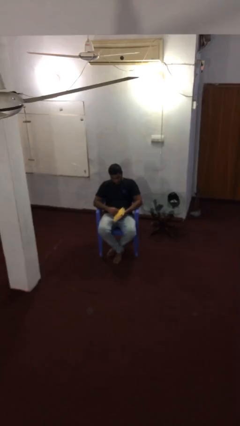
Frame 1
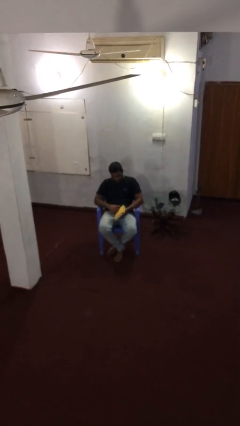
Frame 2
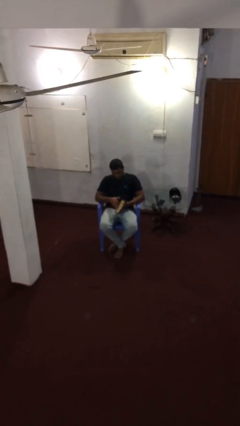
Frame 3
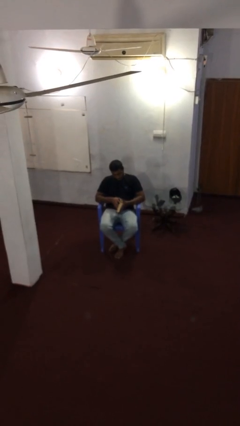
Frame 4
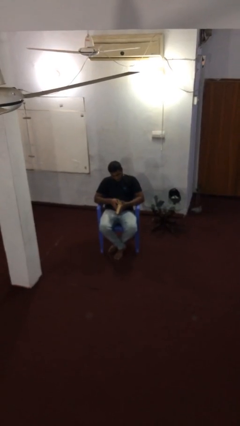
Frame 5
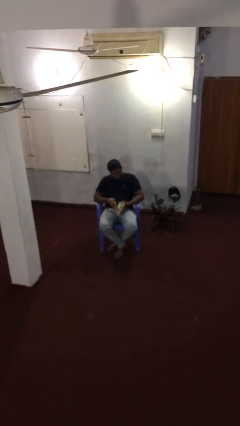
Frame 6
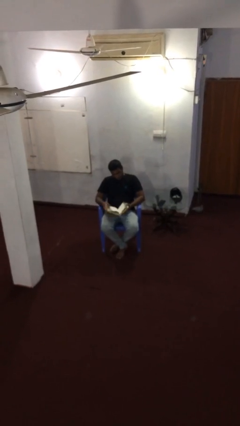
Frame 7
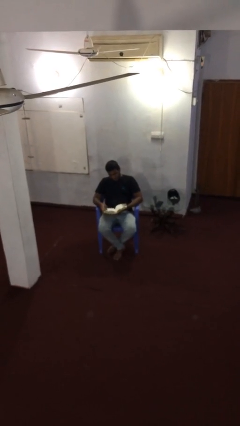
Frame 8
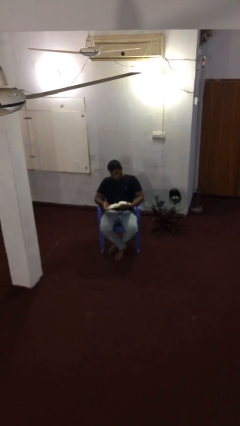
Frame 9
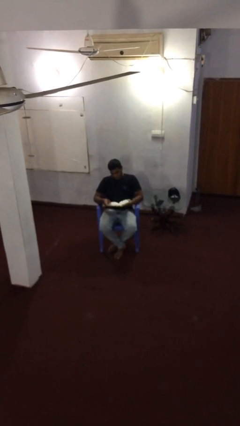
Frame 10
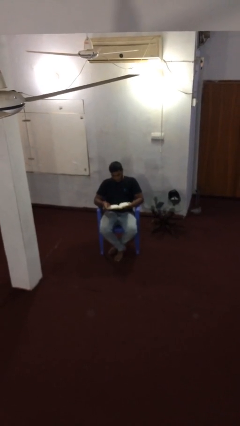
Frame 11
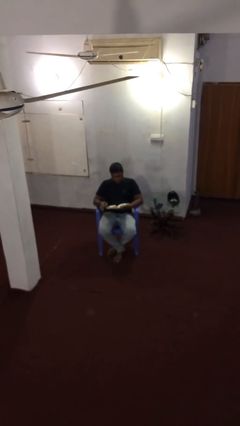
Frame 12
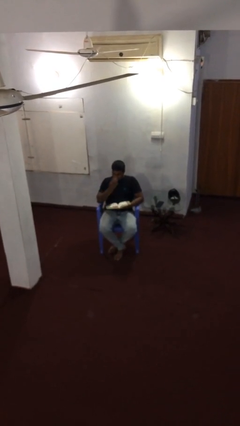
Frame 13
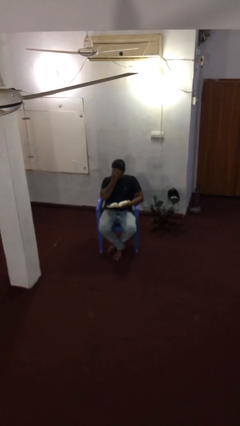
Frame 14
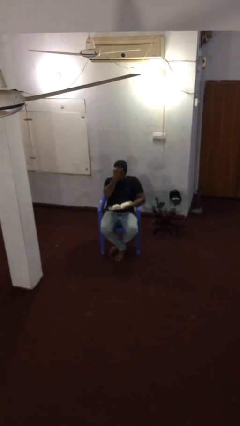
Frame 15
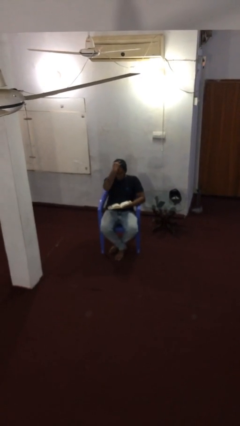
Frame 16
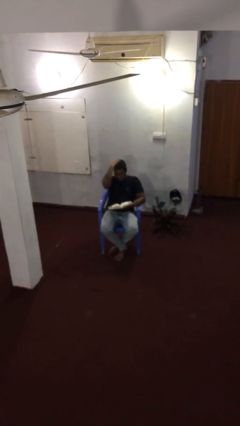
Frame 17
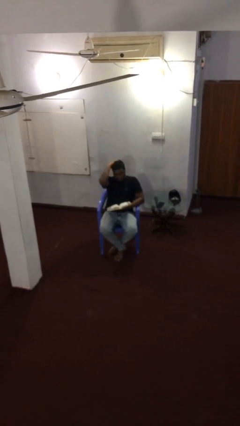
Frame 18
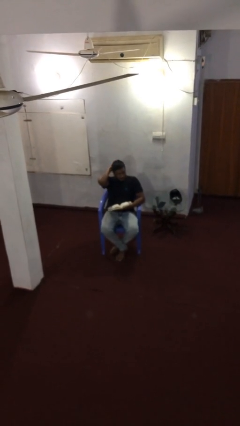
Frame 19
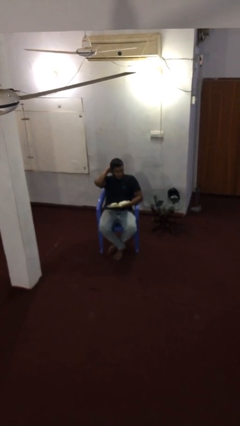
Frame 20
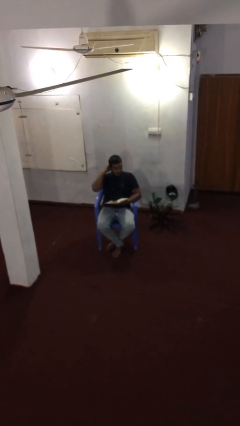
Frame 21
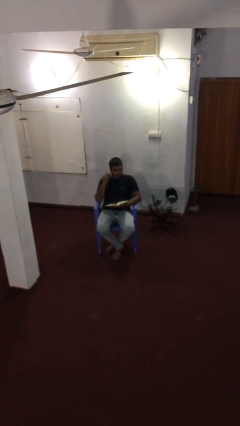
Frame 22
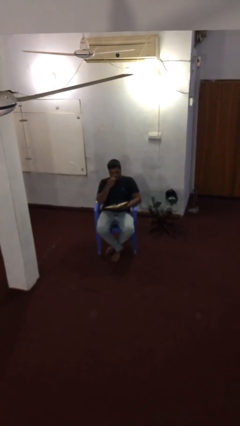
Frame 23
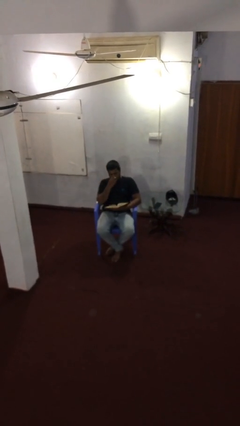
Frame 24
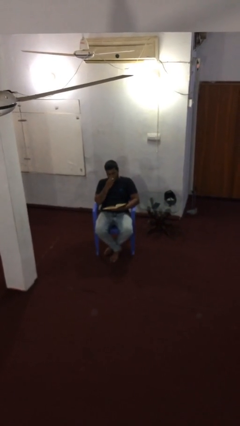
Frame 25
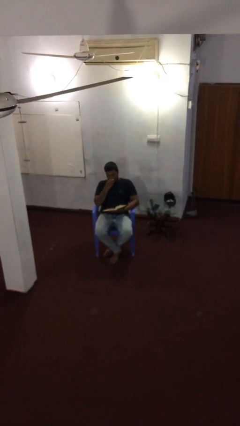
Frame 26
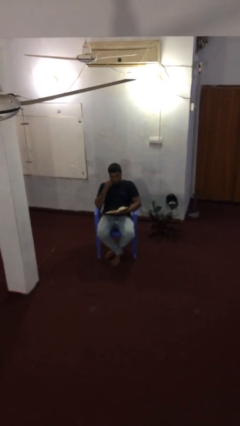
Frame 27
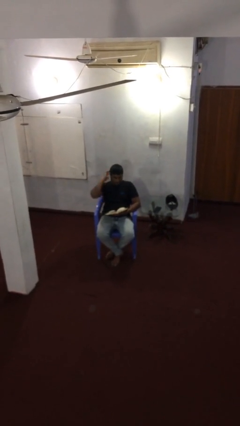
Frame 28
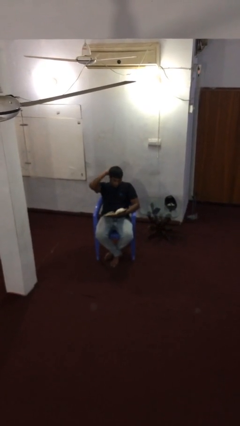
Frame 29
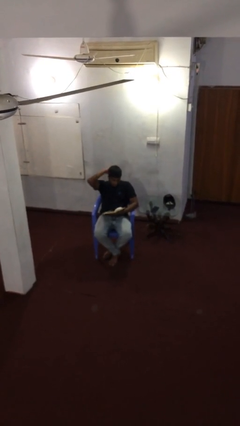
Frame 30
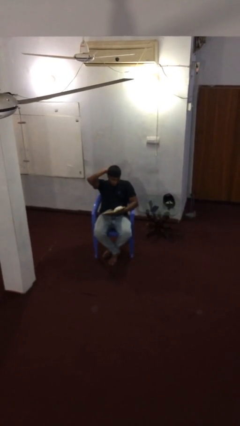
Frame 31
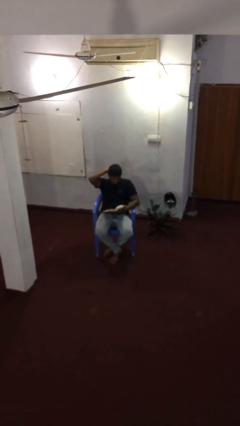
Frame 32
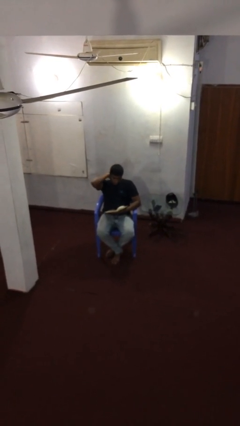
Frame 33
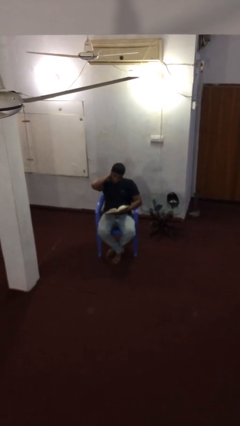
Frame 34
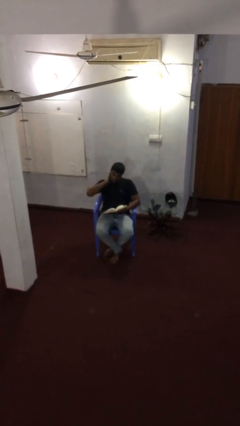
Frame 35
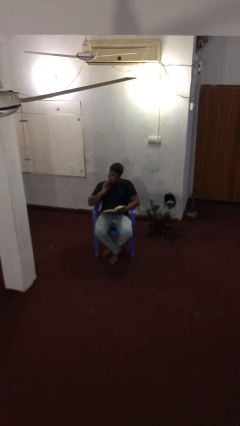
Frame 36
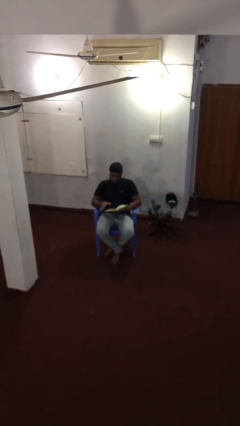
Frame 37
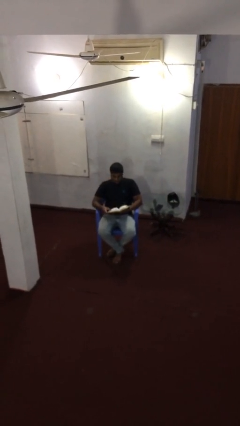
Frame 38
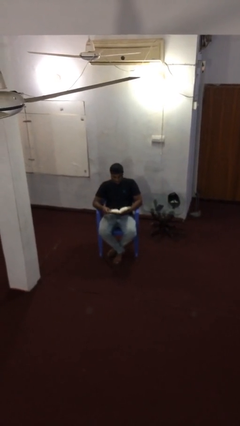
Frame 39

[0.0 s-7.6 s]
person reads document

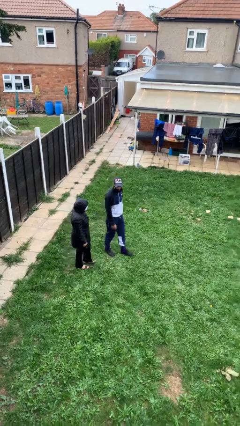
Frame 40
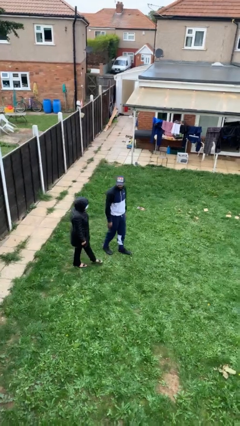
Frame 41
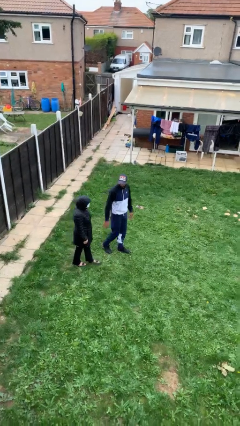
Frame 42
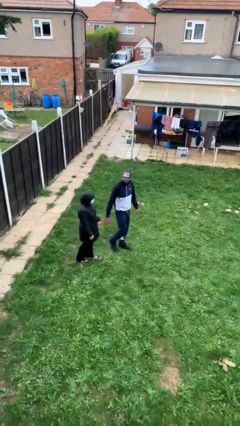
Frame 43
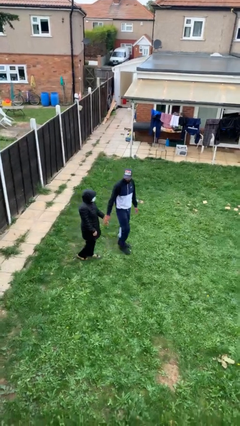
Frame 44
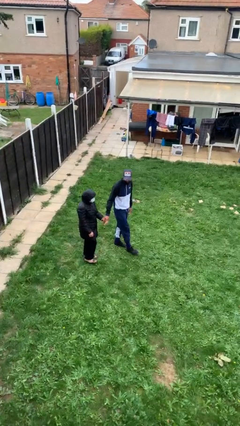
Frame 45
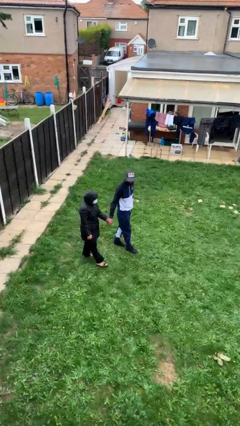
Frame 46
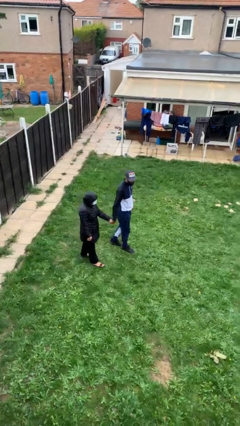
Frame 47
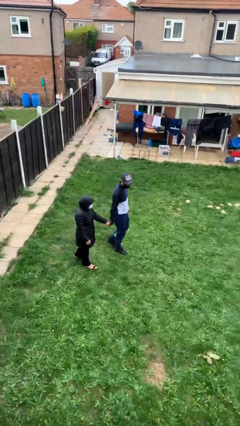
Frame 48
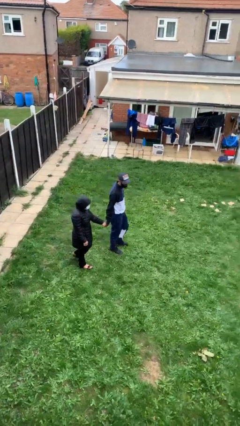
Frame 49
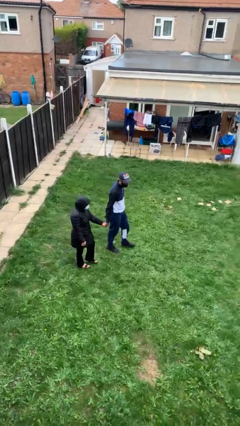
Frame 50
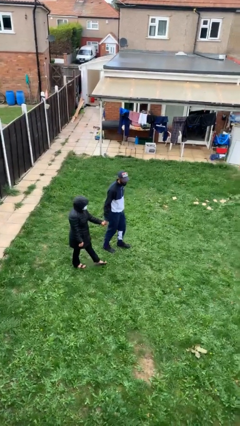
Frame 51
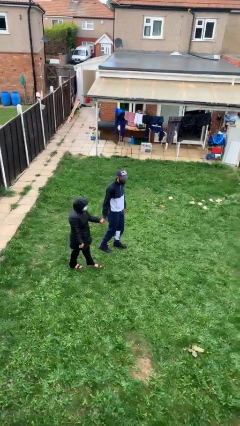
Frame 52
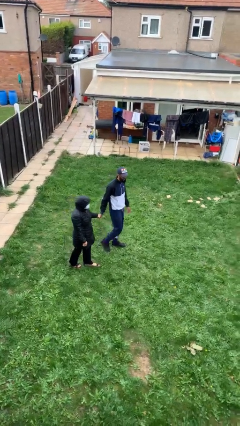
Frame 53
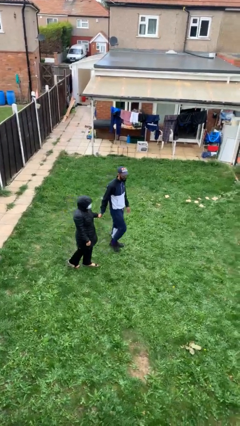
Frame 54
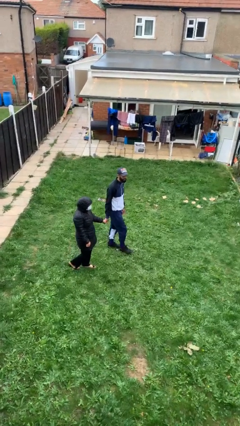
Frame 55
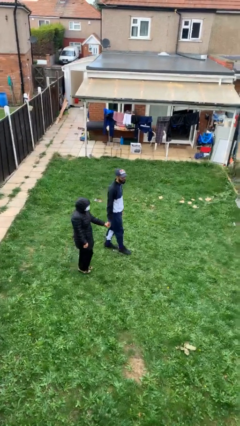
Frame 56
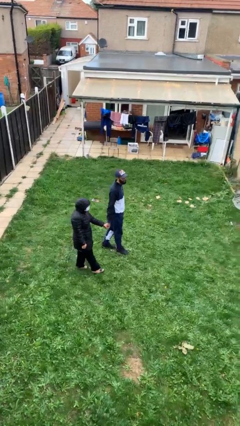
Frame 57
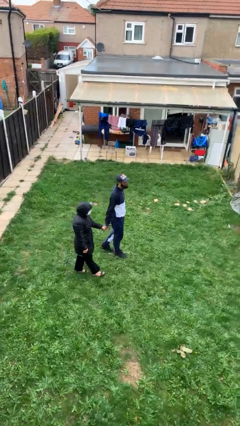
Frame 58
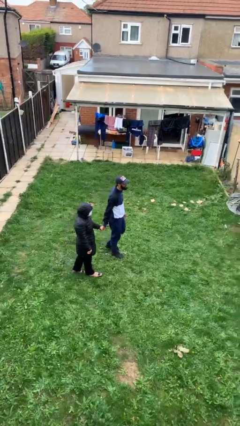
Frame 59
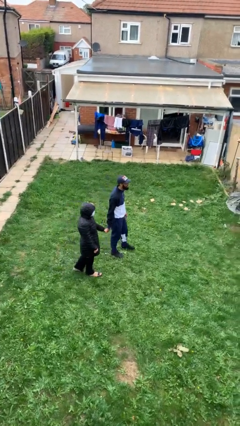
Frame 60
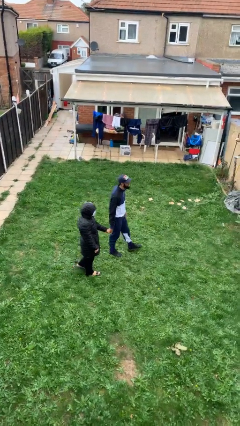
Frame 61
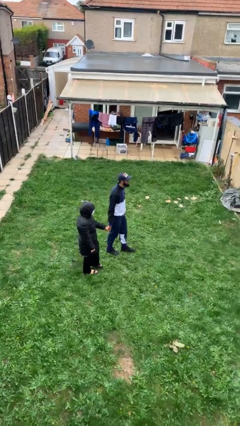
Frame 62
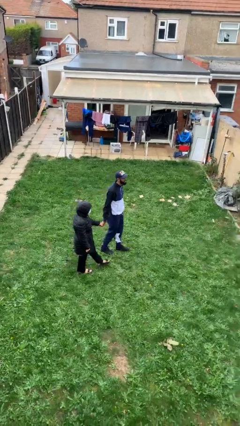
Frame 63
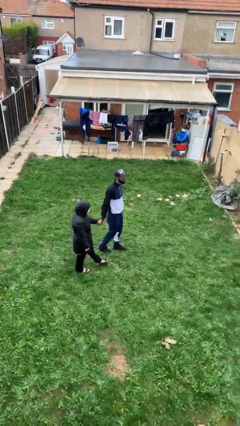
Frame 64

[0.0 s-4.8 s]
person holds hand

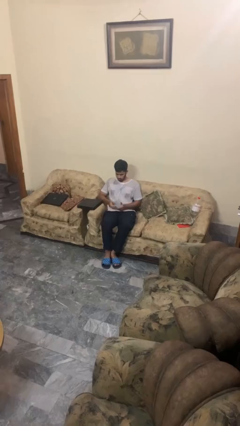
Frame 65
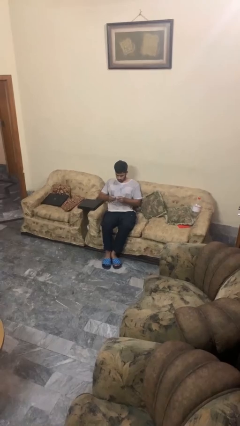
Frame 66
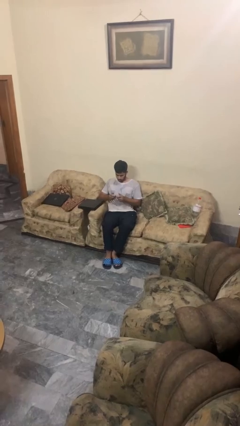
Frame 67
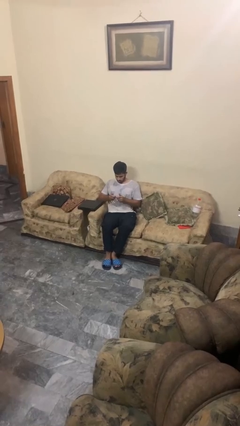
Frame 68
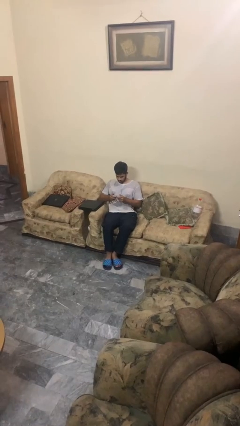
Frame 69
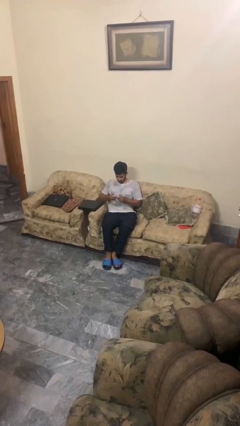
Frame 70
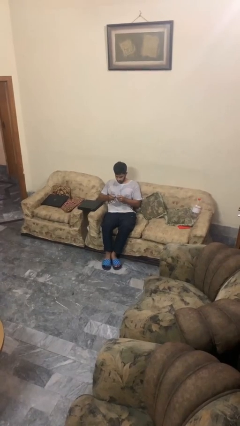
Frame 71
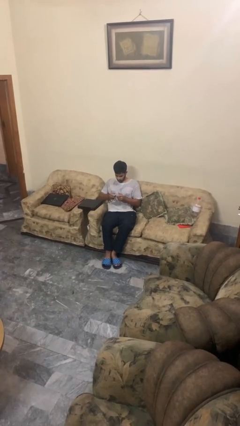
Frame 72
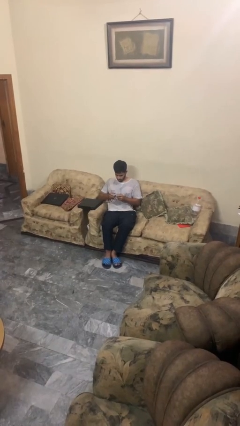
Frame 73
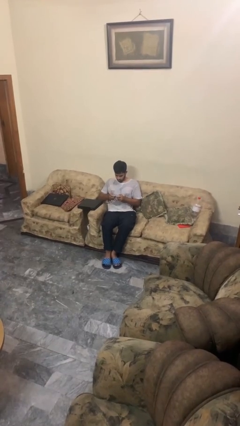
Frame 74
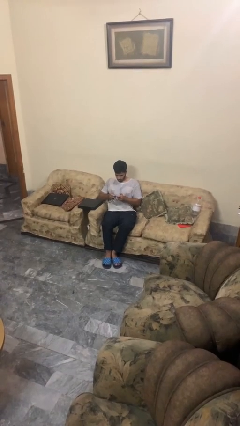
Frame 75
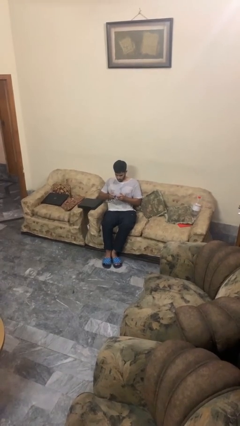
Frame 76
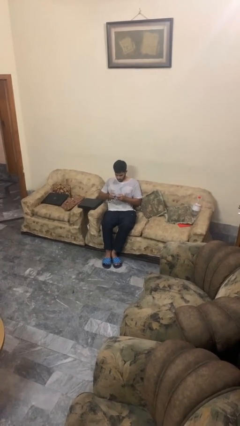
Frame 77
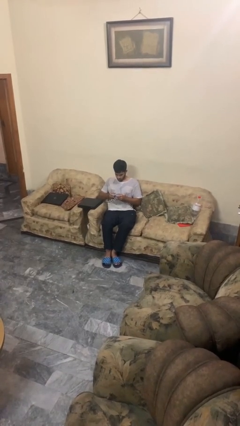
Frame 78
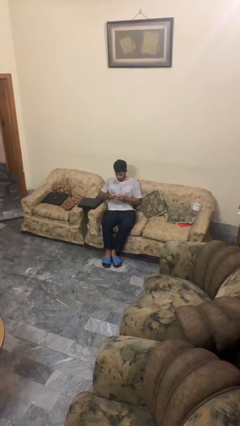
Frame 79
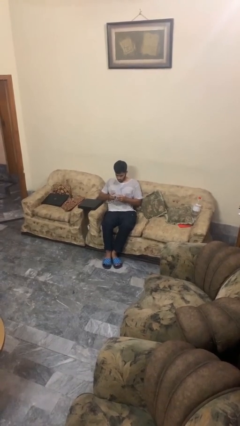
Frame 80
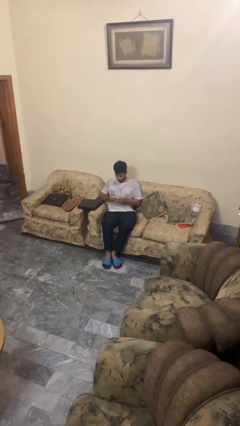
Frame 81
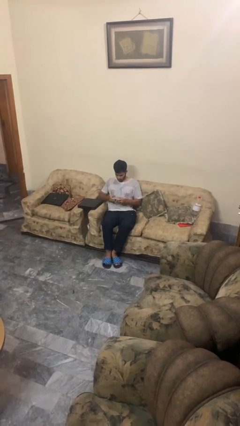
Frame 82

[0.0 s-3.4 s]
person interacts with handheld game

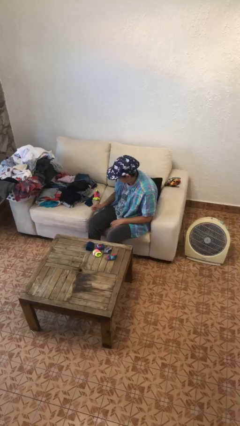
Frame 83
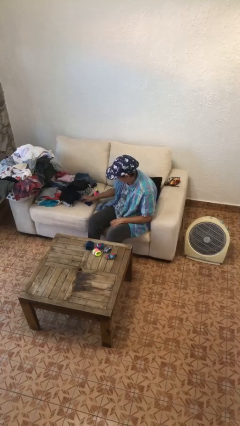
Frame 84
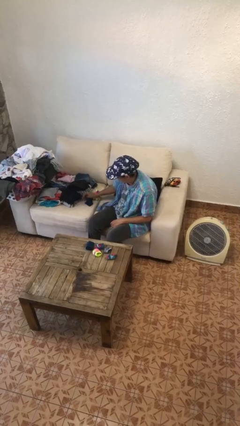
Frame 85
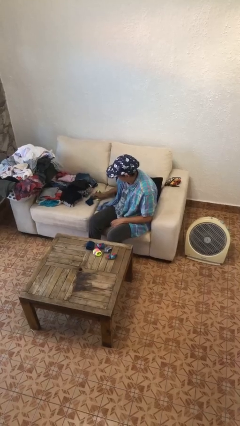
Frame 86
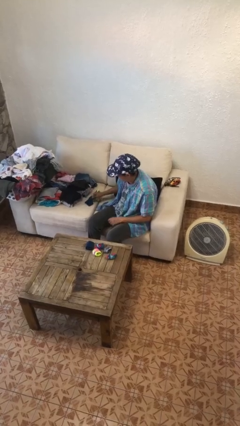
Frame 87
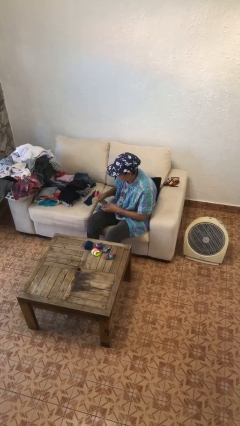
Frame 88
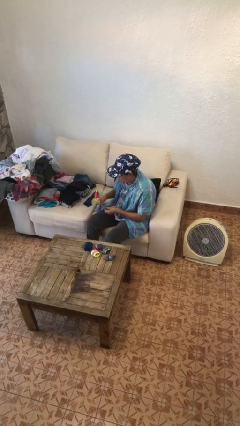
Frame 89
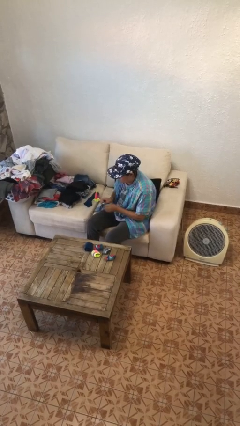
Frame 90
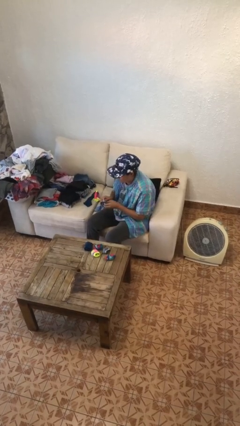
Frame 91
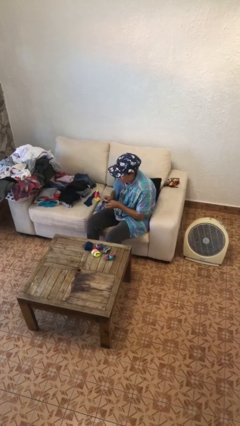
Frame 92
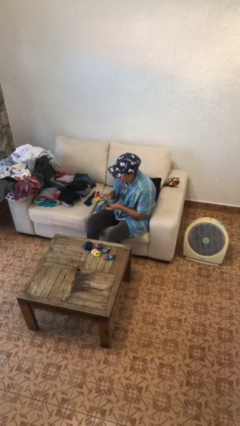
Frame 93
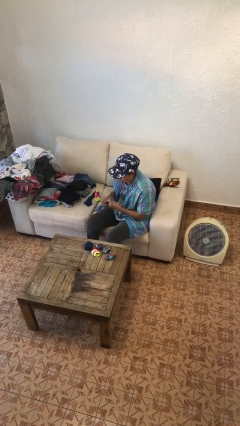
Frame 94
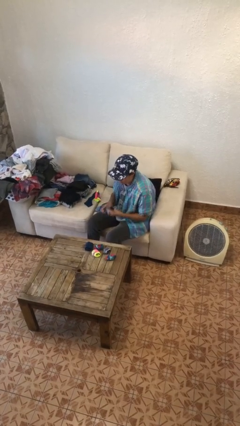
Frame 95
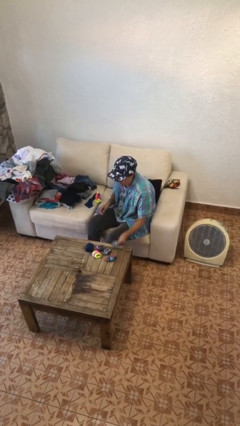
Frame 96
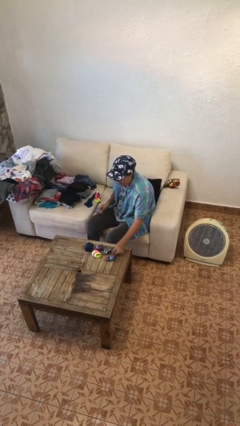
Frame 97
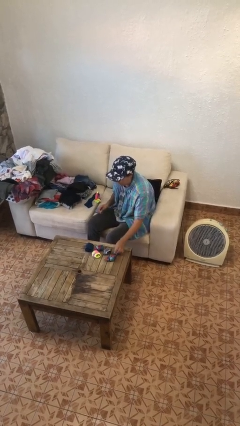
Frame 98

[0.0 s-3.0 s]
person folds socks
